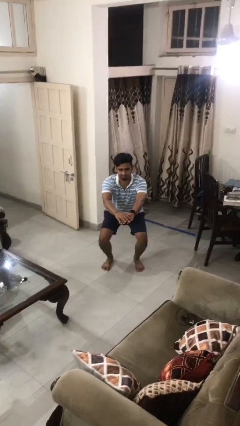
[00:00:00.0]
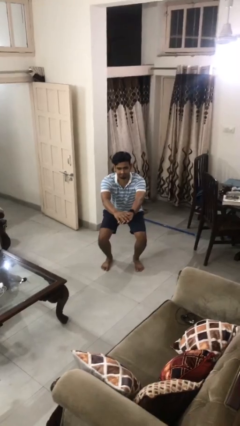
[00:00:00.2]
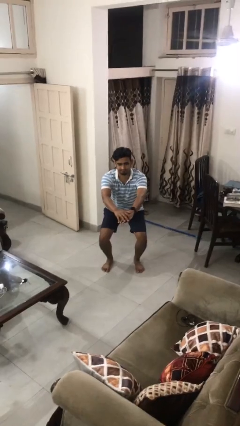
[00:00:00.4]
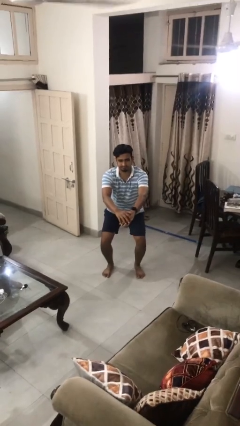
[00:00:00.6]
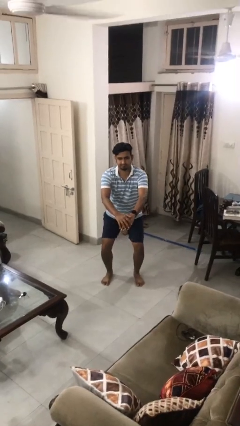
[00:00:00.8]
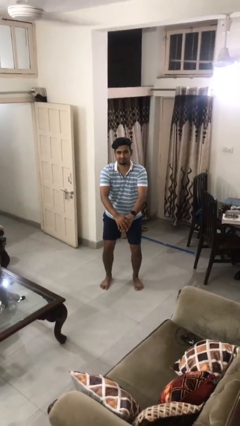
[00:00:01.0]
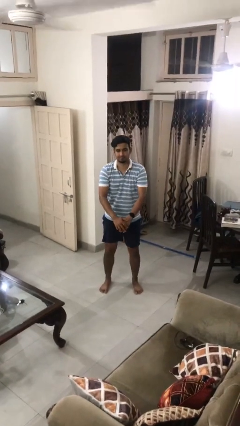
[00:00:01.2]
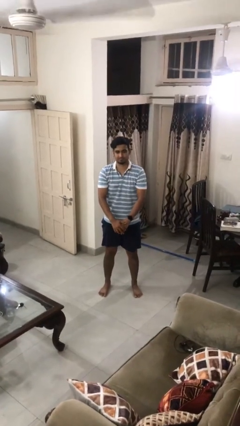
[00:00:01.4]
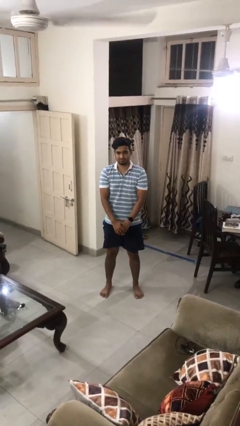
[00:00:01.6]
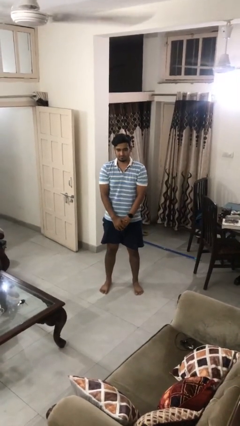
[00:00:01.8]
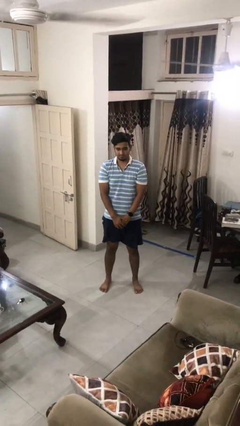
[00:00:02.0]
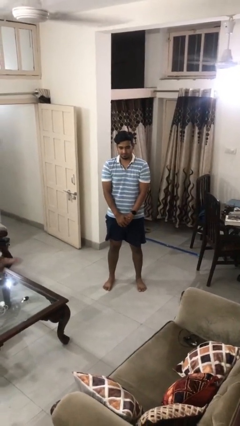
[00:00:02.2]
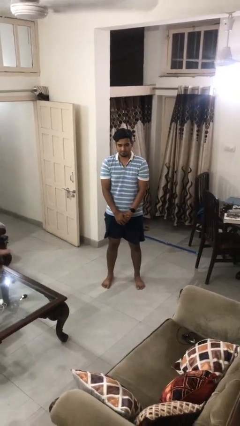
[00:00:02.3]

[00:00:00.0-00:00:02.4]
person stands up

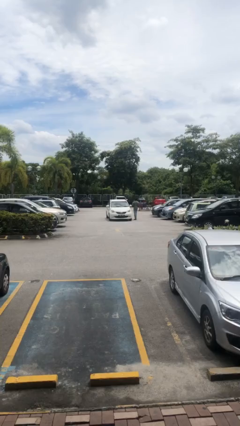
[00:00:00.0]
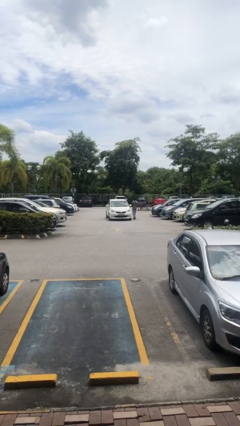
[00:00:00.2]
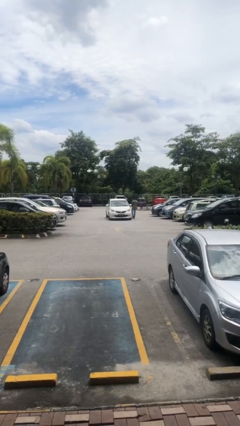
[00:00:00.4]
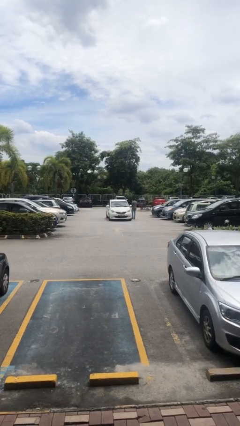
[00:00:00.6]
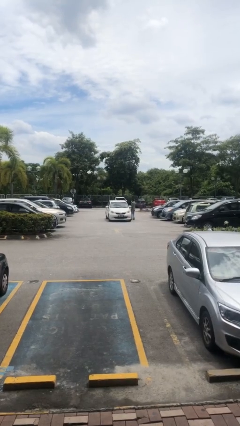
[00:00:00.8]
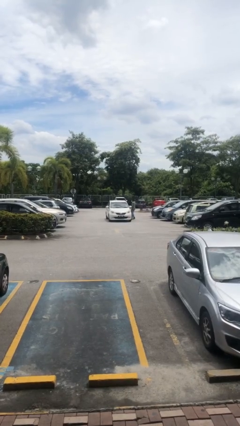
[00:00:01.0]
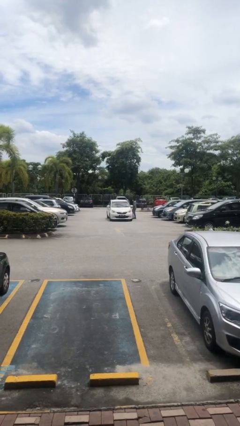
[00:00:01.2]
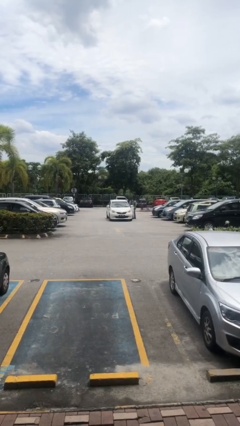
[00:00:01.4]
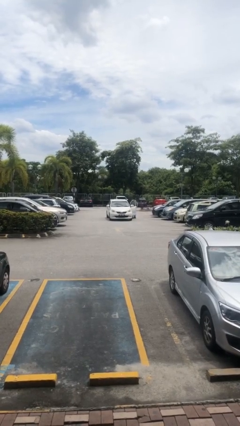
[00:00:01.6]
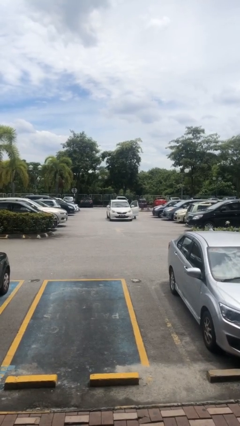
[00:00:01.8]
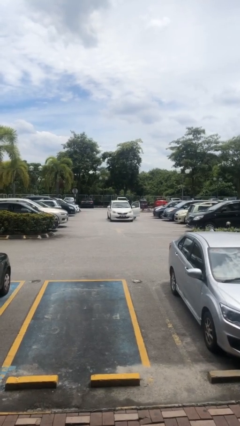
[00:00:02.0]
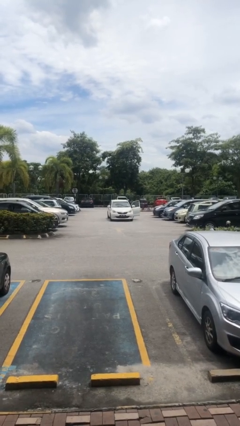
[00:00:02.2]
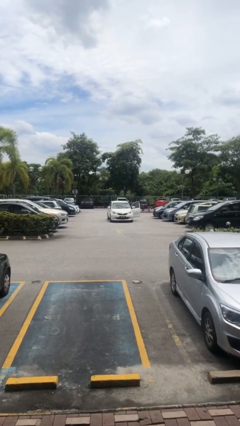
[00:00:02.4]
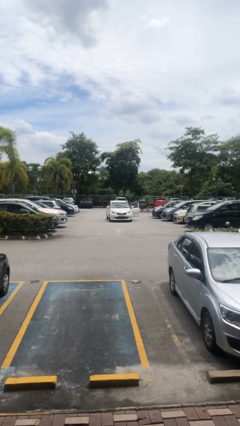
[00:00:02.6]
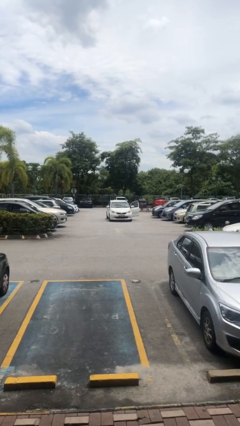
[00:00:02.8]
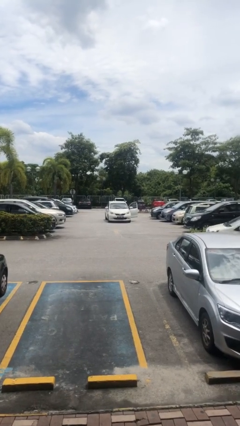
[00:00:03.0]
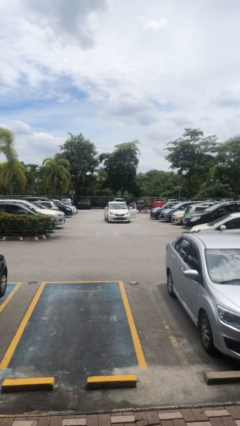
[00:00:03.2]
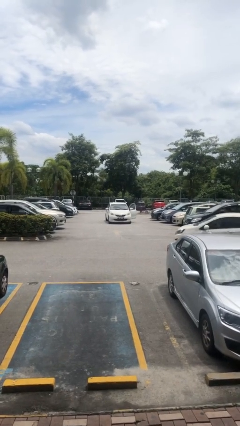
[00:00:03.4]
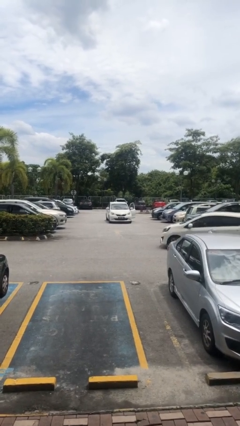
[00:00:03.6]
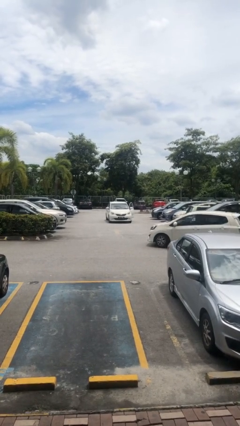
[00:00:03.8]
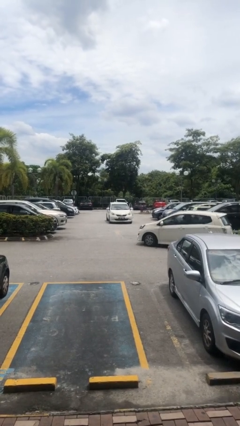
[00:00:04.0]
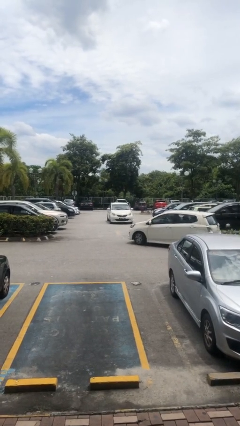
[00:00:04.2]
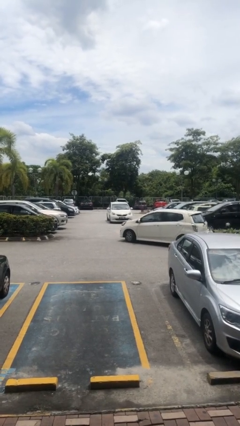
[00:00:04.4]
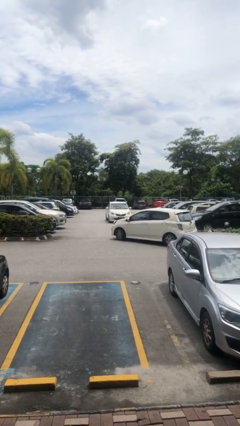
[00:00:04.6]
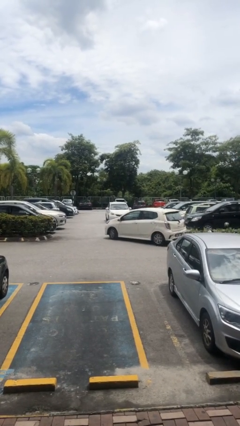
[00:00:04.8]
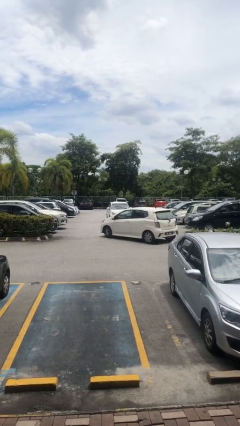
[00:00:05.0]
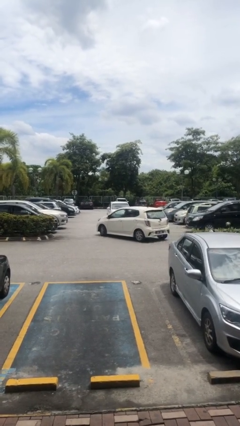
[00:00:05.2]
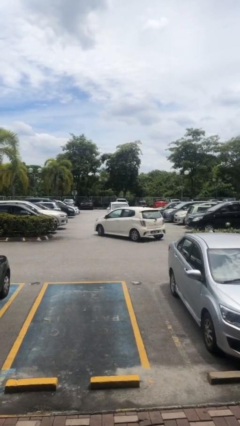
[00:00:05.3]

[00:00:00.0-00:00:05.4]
car picks up person

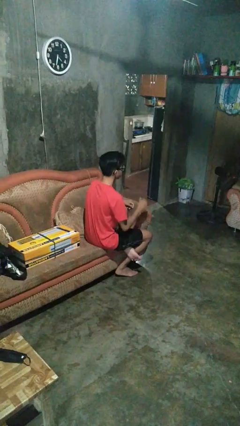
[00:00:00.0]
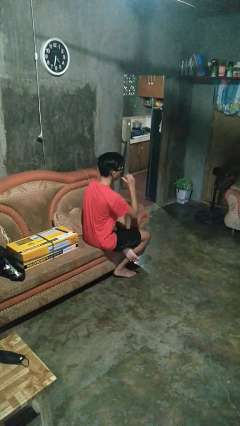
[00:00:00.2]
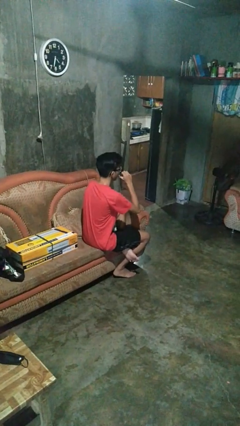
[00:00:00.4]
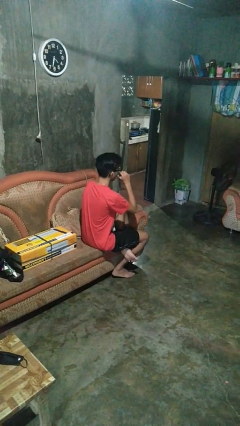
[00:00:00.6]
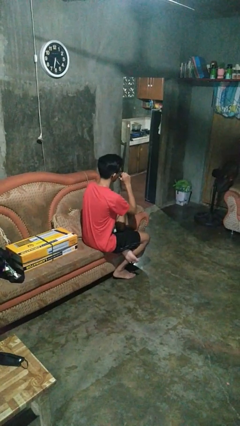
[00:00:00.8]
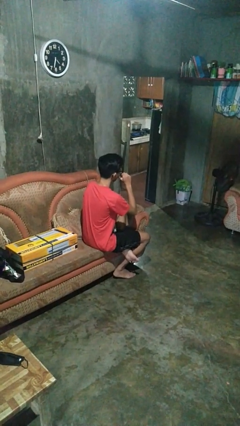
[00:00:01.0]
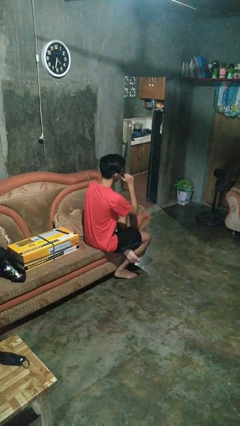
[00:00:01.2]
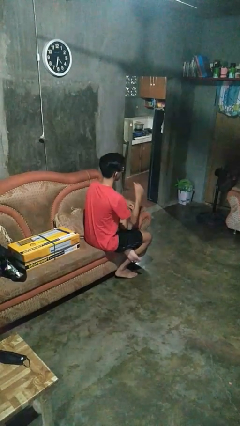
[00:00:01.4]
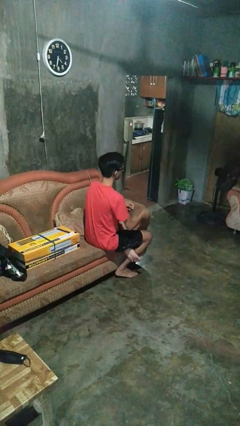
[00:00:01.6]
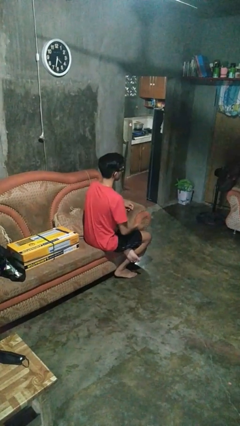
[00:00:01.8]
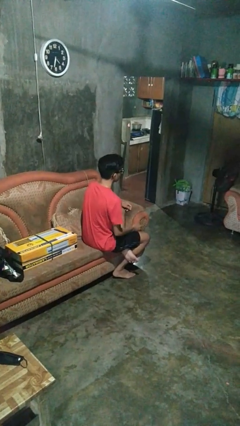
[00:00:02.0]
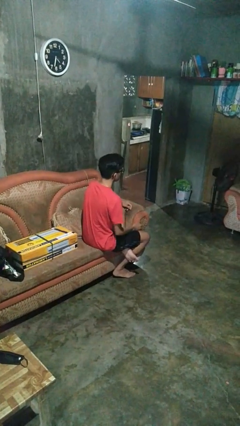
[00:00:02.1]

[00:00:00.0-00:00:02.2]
person licks fingers

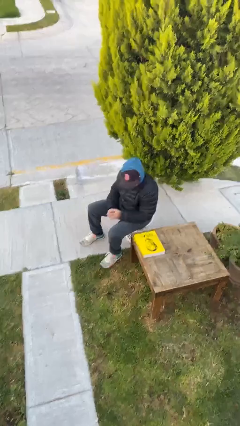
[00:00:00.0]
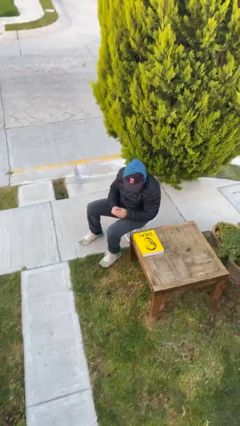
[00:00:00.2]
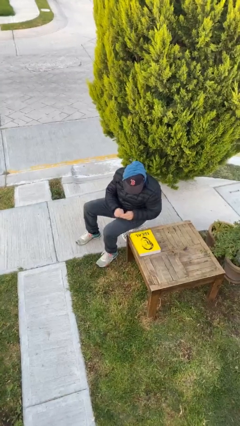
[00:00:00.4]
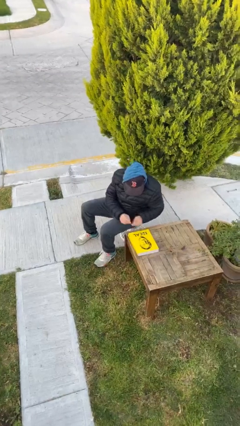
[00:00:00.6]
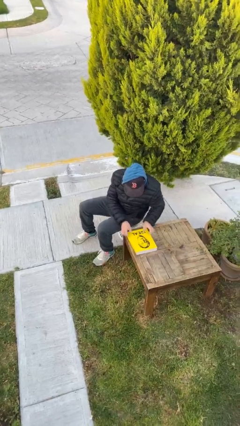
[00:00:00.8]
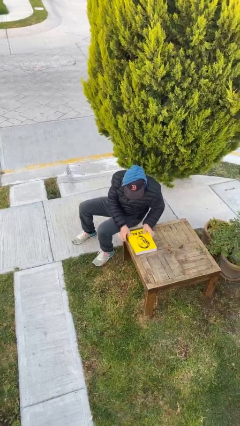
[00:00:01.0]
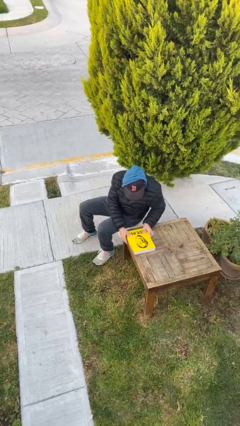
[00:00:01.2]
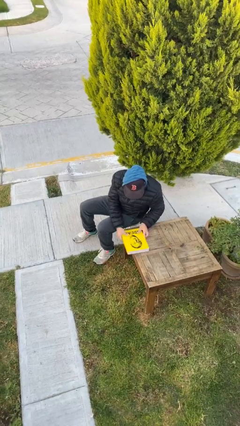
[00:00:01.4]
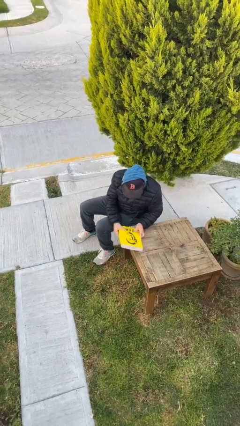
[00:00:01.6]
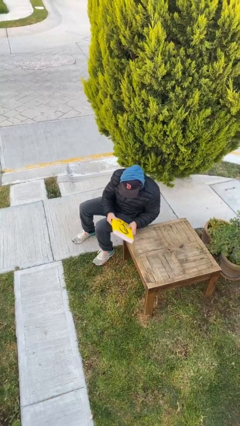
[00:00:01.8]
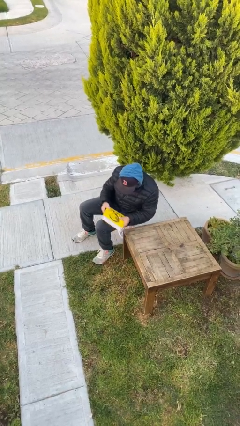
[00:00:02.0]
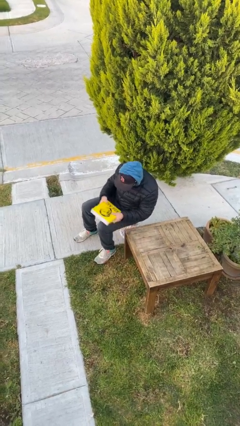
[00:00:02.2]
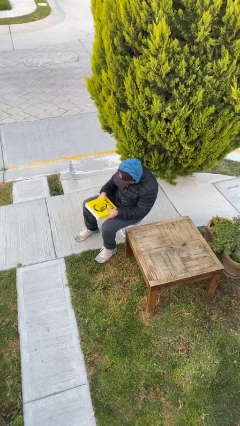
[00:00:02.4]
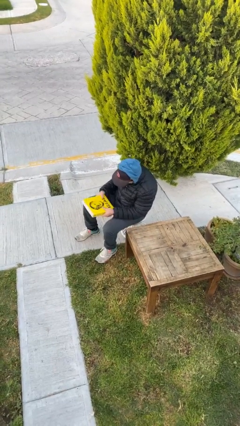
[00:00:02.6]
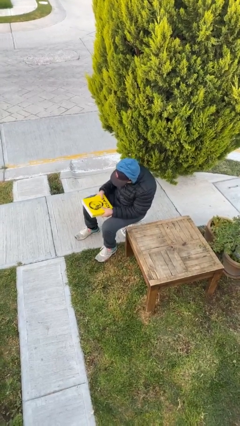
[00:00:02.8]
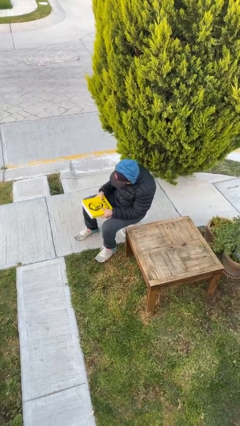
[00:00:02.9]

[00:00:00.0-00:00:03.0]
person picks up object from table

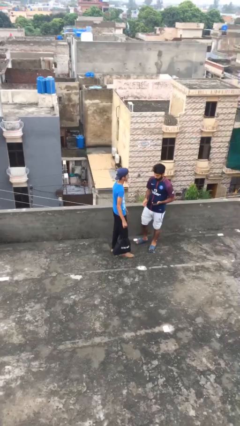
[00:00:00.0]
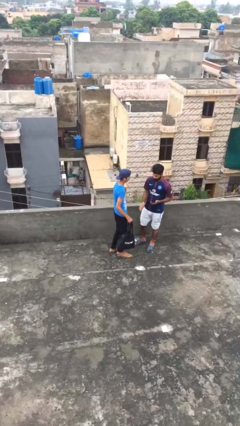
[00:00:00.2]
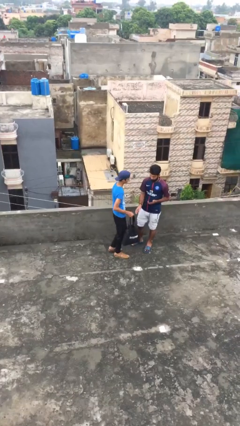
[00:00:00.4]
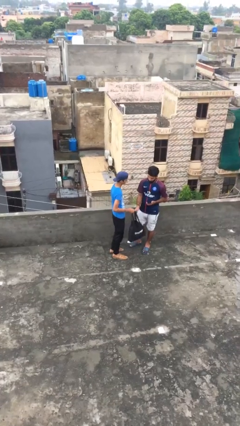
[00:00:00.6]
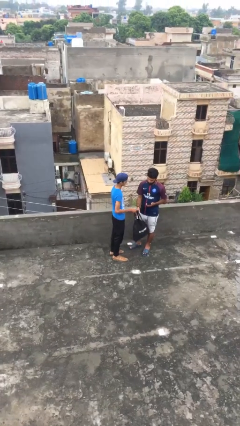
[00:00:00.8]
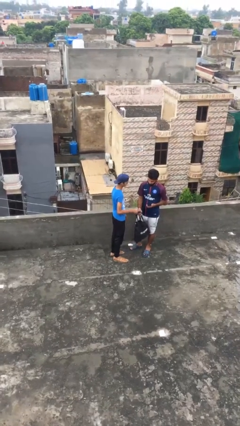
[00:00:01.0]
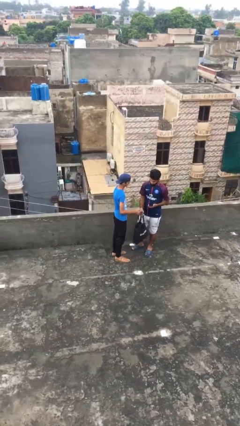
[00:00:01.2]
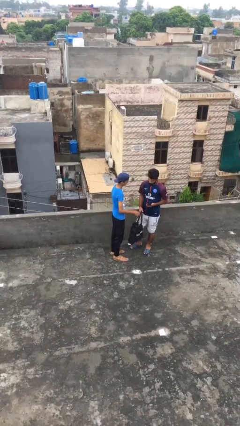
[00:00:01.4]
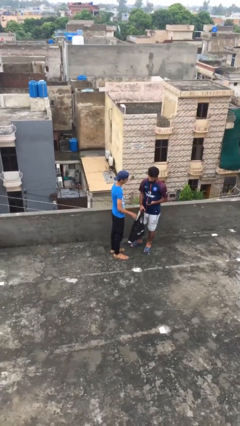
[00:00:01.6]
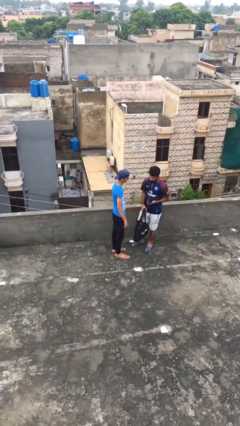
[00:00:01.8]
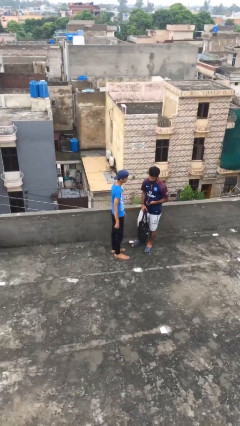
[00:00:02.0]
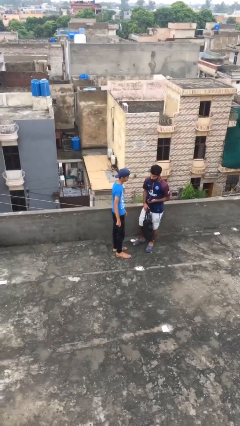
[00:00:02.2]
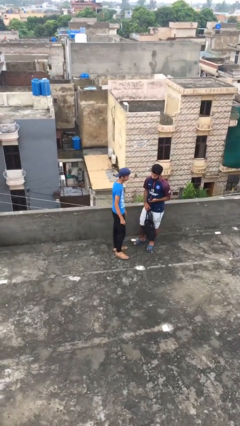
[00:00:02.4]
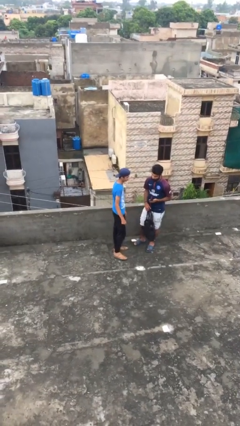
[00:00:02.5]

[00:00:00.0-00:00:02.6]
person transfers object to person

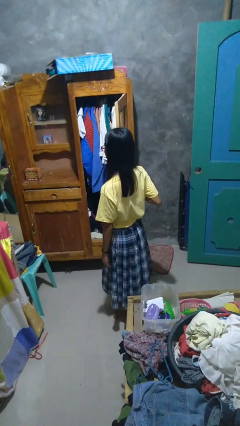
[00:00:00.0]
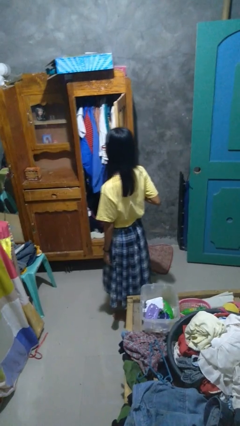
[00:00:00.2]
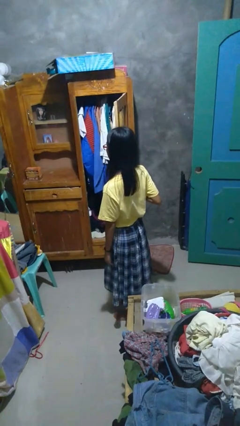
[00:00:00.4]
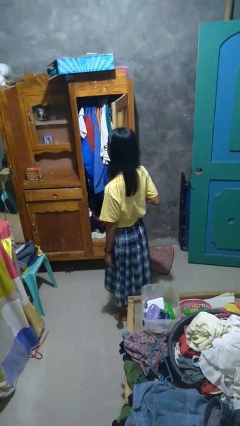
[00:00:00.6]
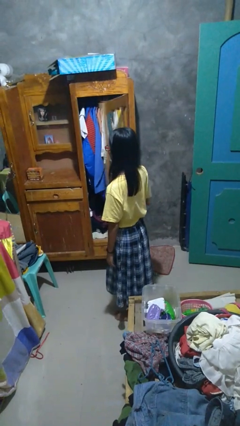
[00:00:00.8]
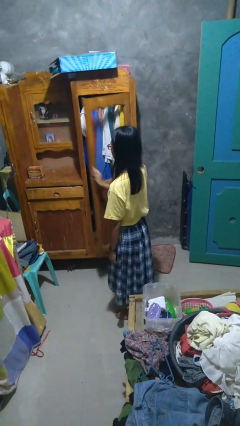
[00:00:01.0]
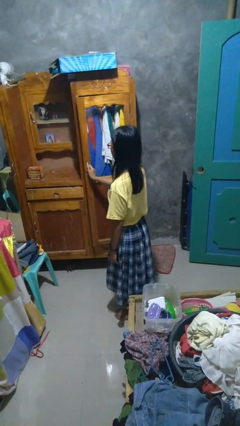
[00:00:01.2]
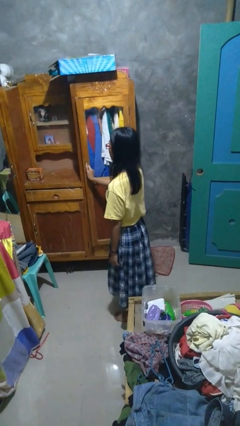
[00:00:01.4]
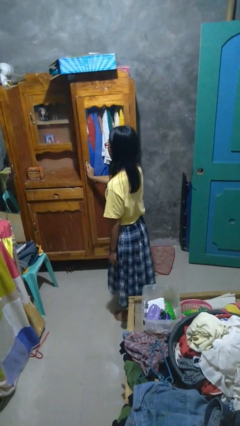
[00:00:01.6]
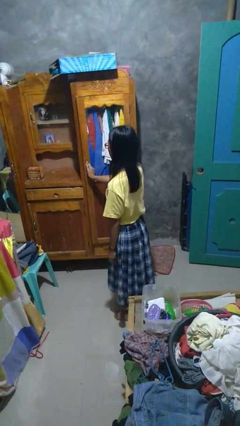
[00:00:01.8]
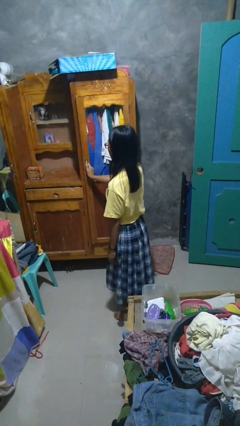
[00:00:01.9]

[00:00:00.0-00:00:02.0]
person closes closet door
